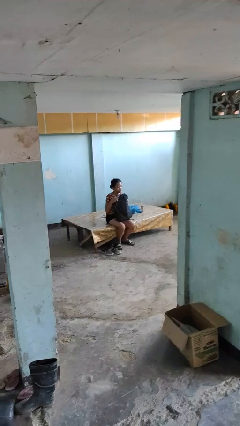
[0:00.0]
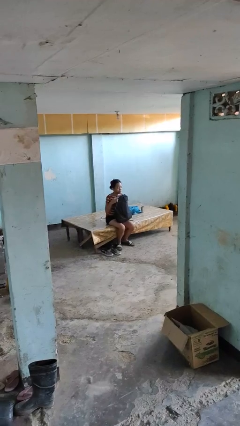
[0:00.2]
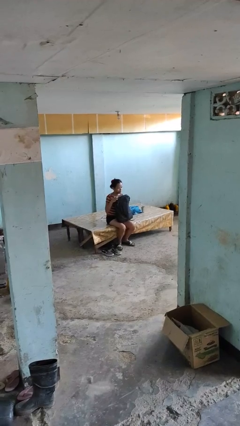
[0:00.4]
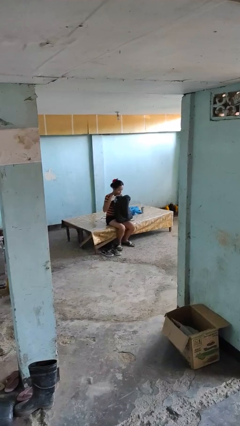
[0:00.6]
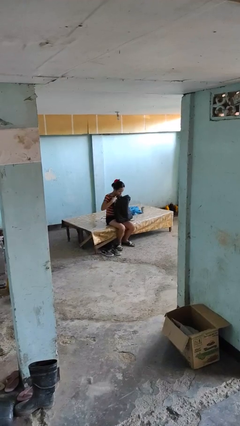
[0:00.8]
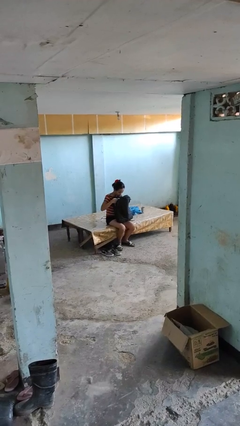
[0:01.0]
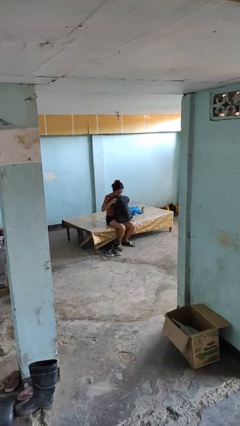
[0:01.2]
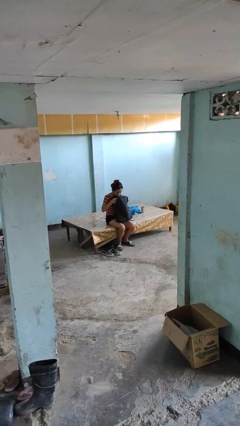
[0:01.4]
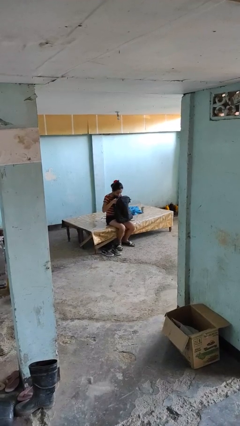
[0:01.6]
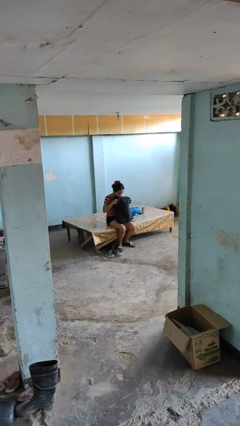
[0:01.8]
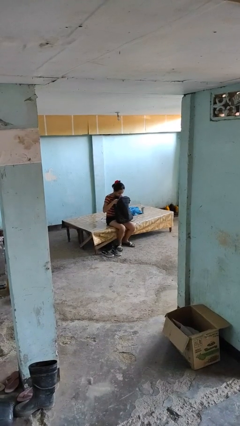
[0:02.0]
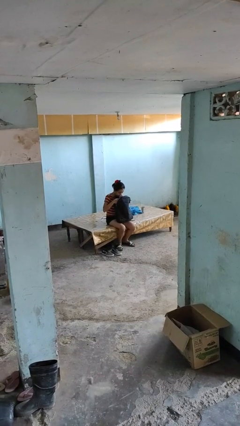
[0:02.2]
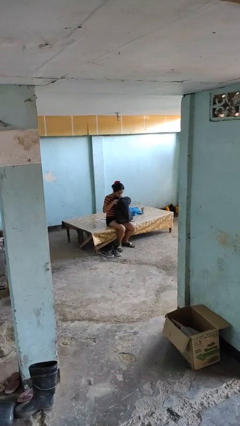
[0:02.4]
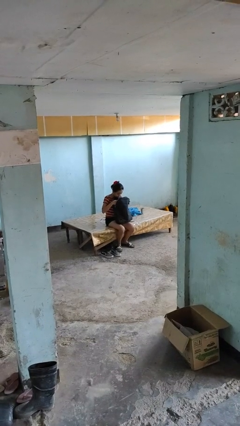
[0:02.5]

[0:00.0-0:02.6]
person searches in backpack

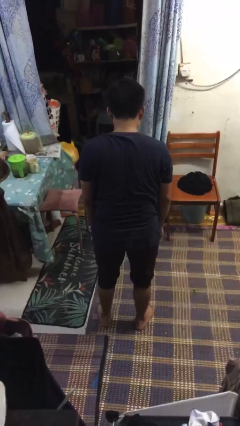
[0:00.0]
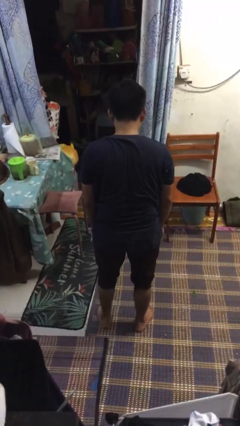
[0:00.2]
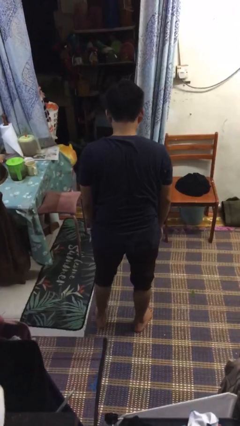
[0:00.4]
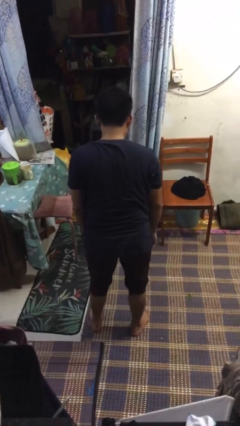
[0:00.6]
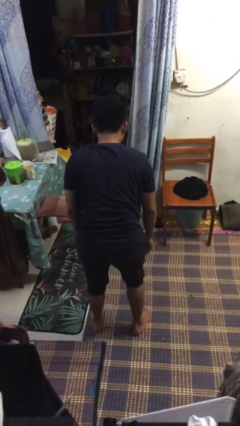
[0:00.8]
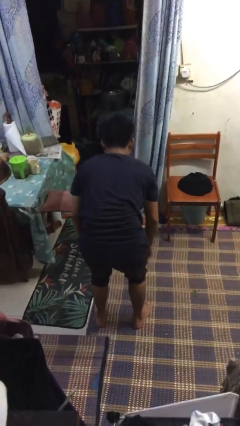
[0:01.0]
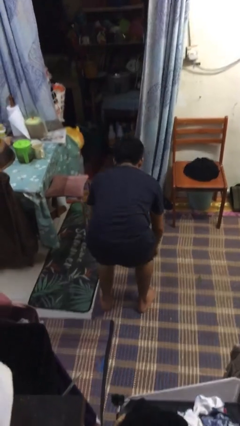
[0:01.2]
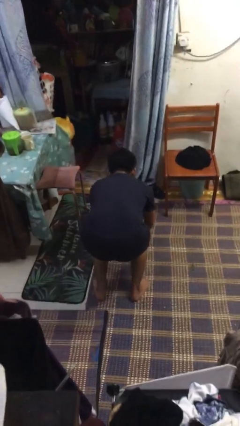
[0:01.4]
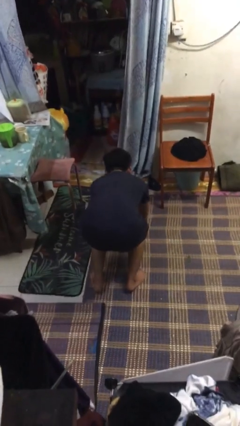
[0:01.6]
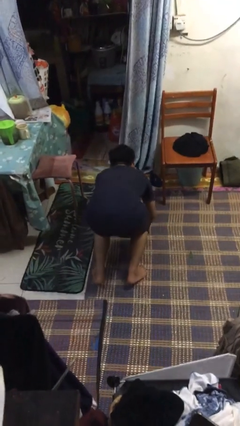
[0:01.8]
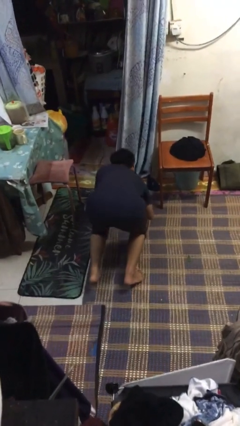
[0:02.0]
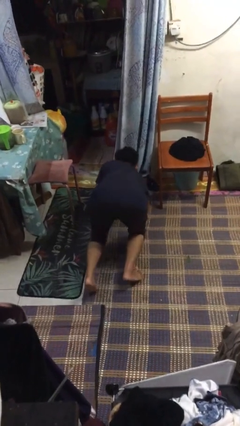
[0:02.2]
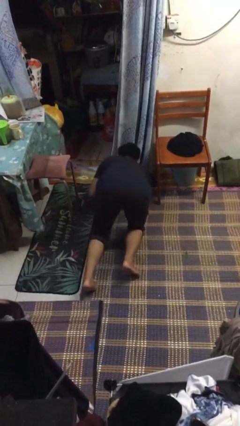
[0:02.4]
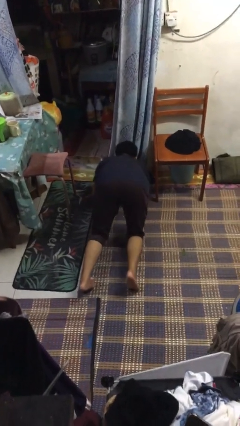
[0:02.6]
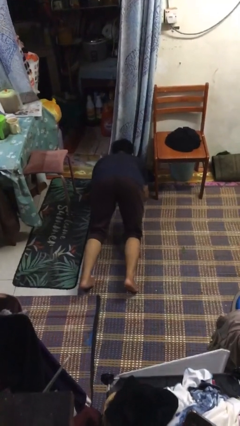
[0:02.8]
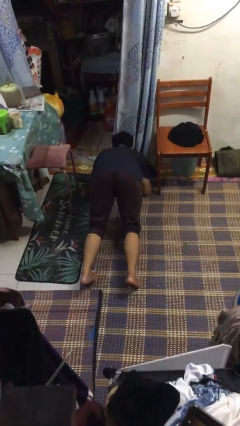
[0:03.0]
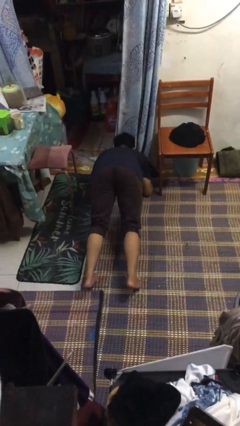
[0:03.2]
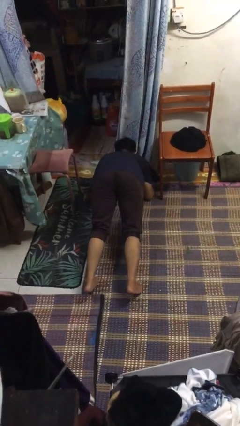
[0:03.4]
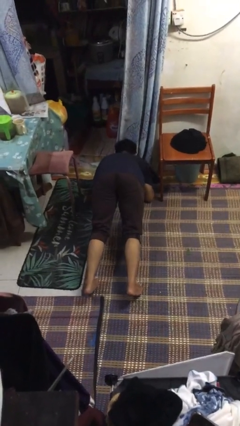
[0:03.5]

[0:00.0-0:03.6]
person exercises with plank

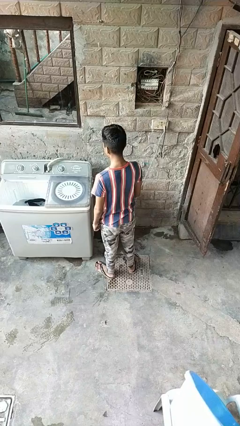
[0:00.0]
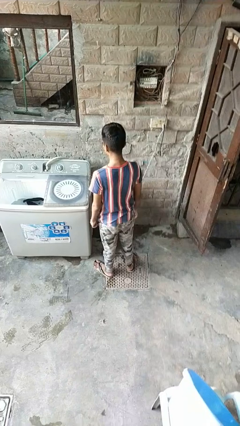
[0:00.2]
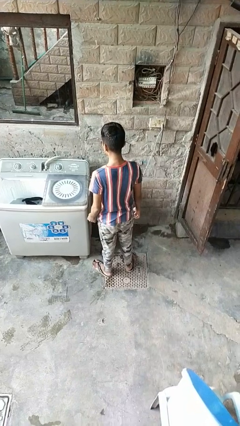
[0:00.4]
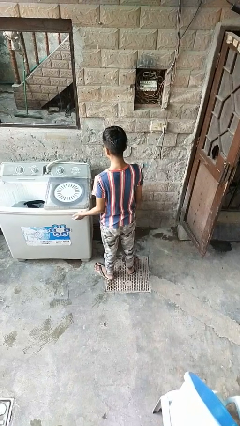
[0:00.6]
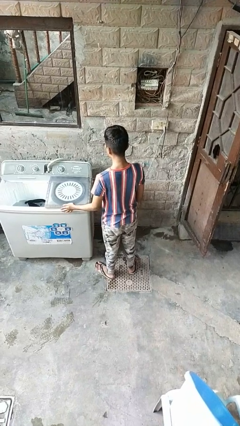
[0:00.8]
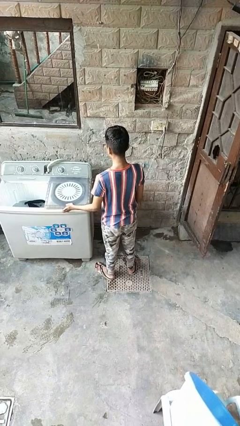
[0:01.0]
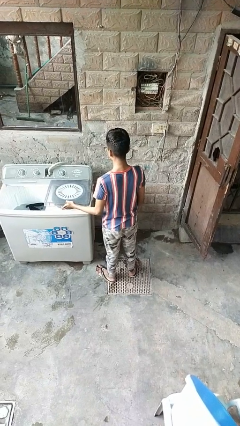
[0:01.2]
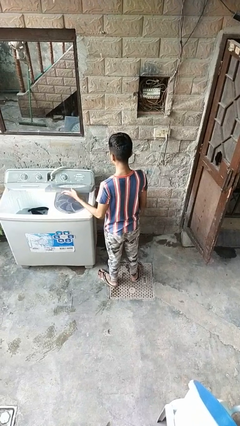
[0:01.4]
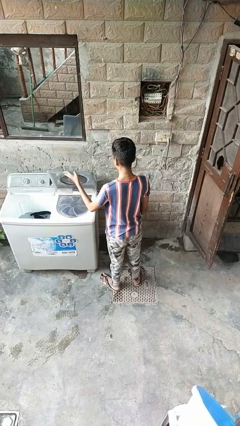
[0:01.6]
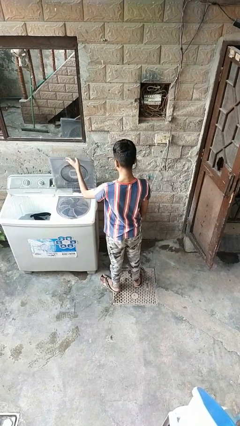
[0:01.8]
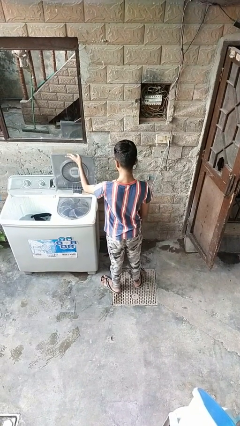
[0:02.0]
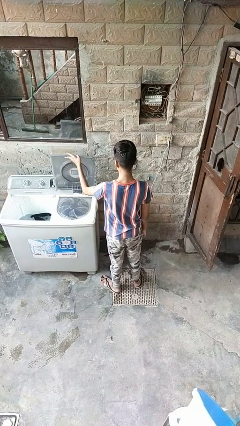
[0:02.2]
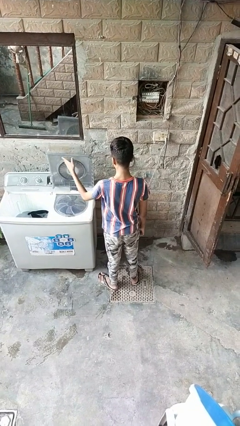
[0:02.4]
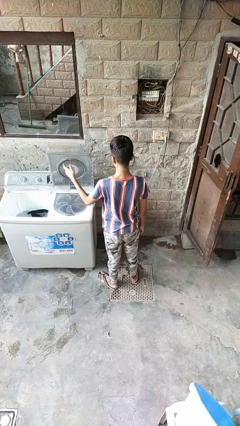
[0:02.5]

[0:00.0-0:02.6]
person turns on faucet

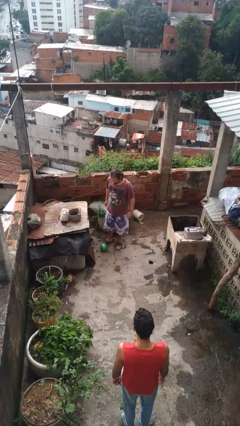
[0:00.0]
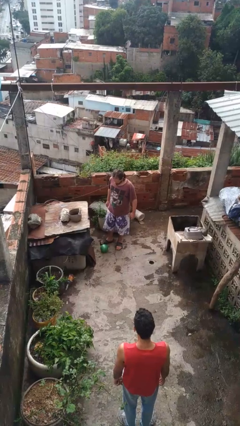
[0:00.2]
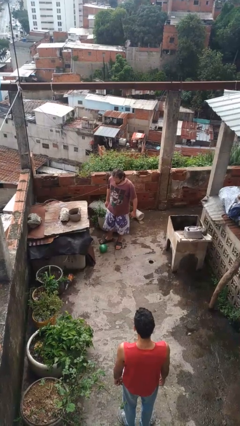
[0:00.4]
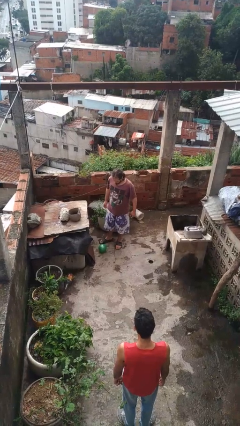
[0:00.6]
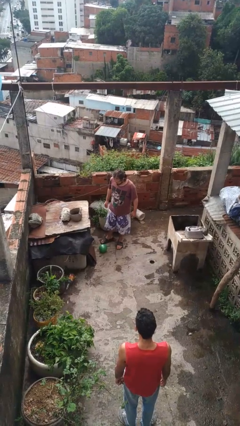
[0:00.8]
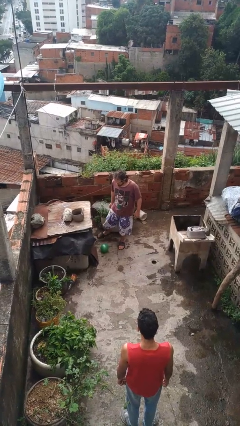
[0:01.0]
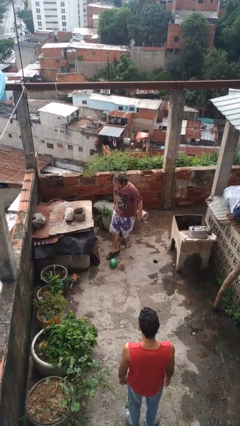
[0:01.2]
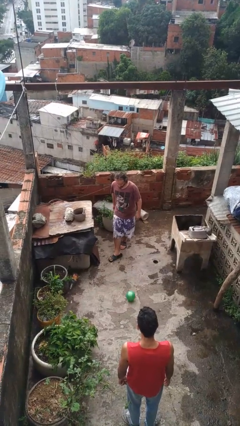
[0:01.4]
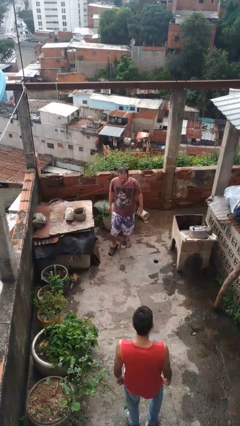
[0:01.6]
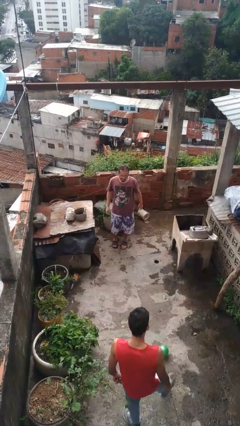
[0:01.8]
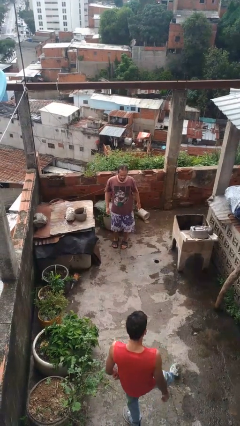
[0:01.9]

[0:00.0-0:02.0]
person kicks object to person

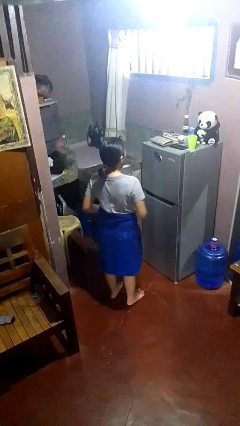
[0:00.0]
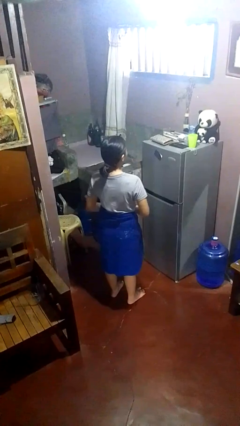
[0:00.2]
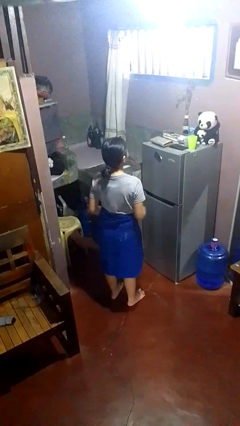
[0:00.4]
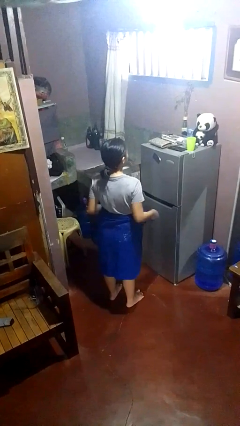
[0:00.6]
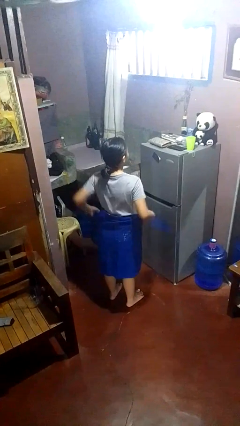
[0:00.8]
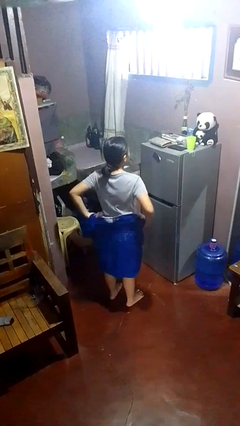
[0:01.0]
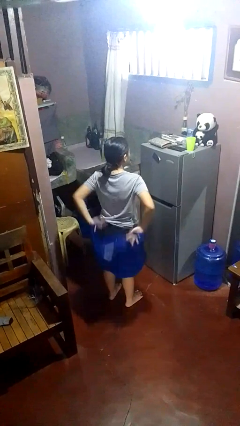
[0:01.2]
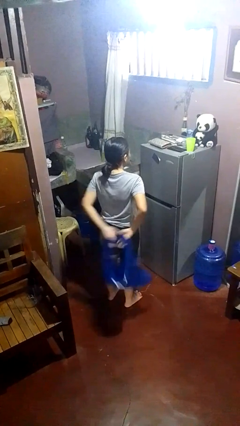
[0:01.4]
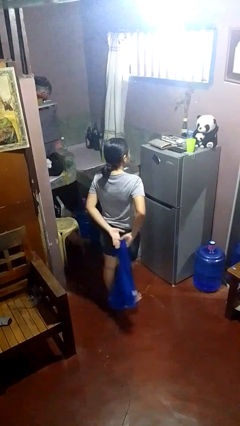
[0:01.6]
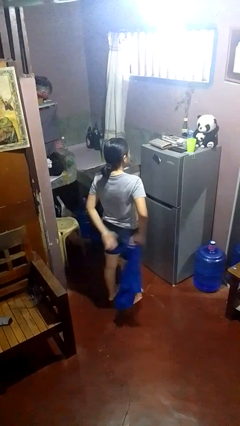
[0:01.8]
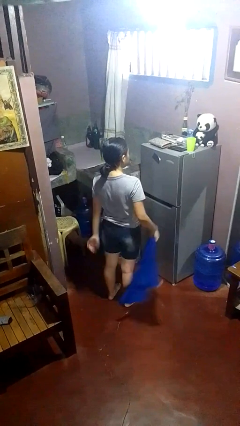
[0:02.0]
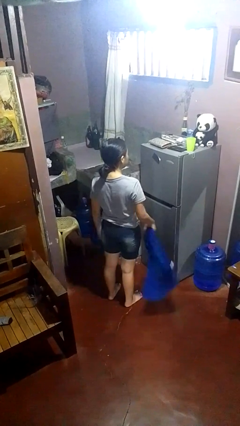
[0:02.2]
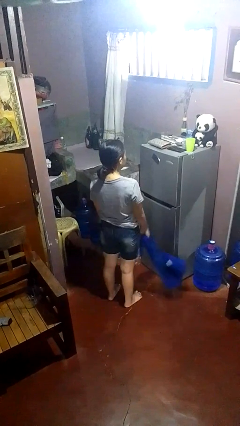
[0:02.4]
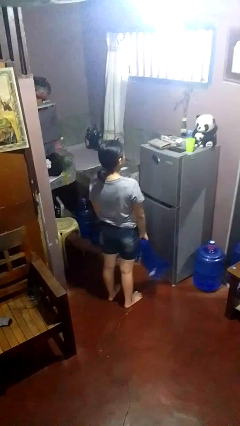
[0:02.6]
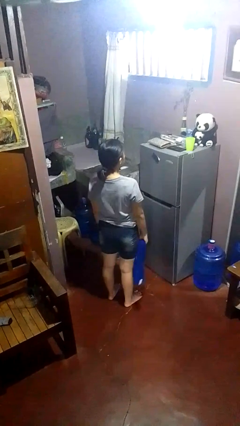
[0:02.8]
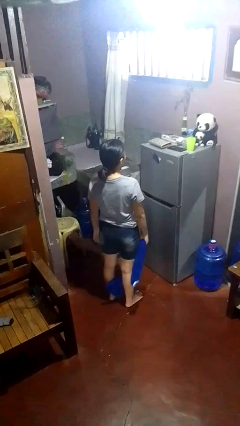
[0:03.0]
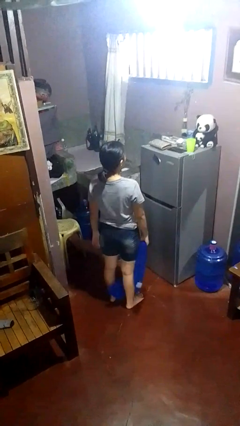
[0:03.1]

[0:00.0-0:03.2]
person unties jacket around waist

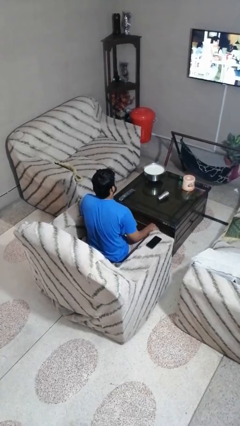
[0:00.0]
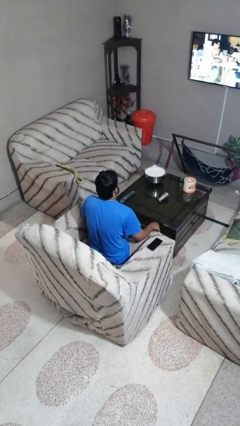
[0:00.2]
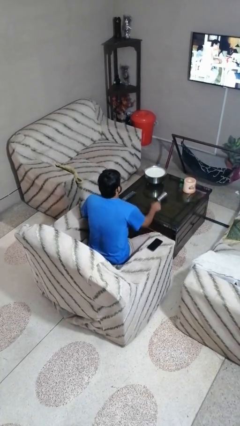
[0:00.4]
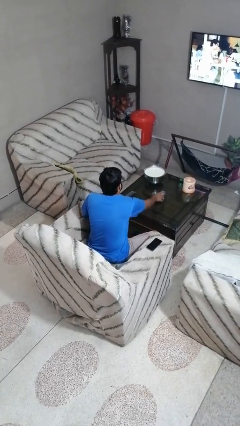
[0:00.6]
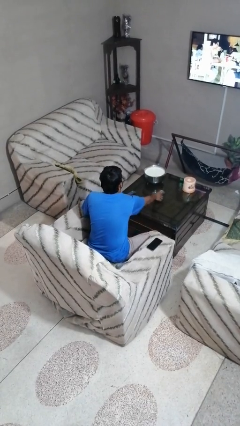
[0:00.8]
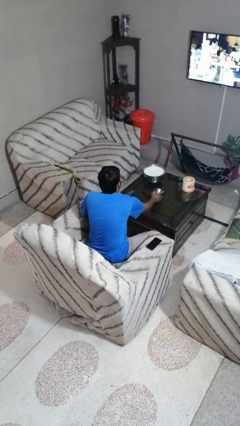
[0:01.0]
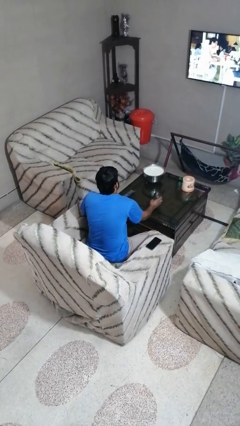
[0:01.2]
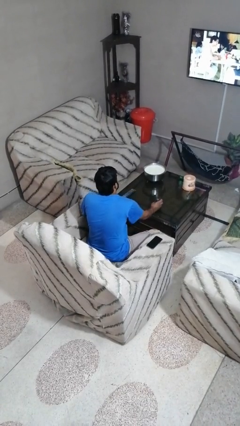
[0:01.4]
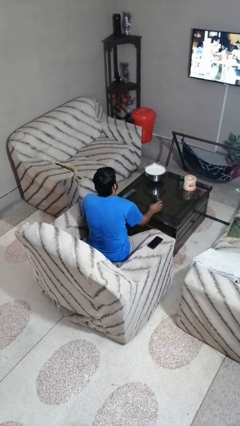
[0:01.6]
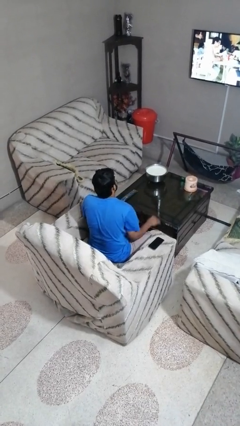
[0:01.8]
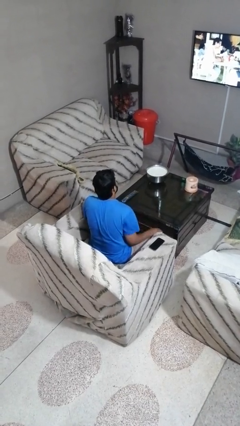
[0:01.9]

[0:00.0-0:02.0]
person sets upright glass

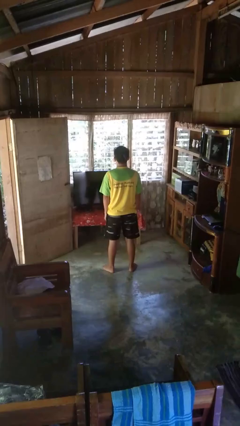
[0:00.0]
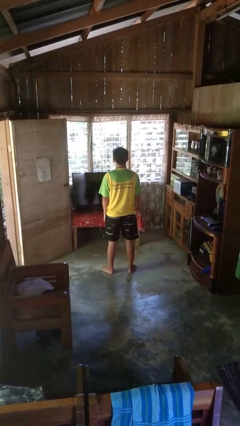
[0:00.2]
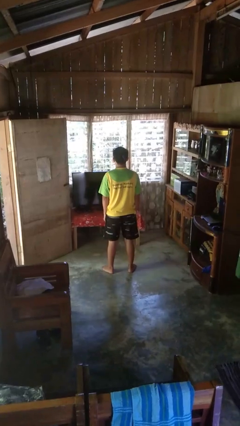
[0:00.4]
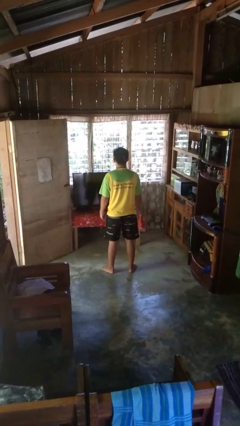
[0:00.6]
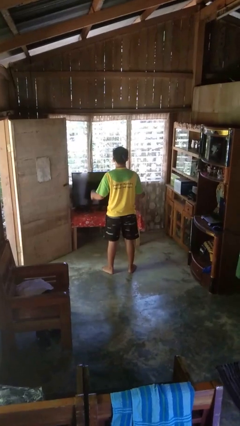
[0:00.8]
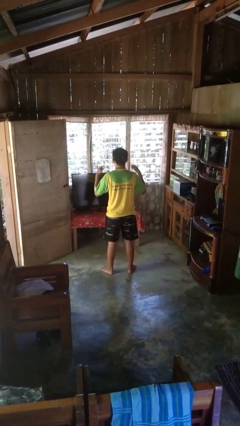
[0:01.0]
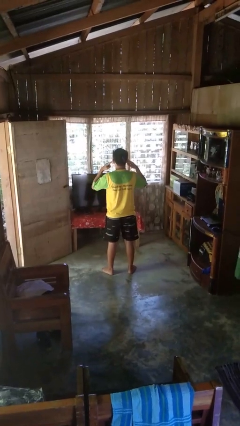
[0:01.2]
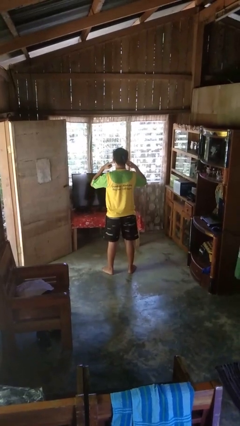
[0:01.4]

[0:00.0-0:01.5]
person puts fingers in ear
